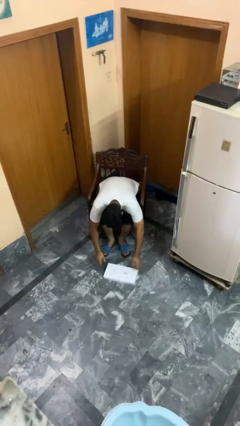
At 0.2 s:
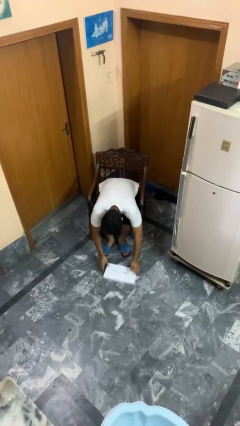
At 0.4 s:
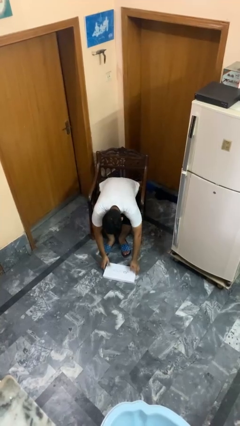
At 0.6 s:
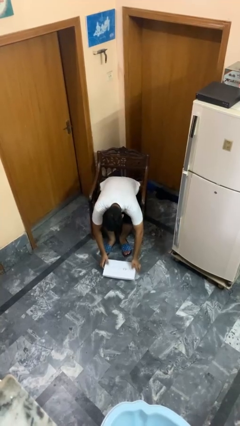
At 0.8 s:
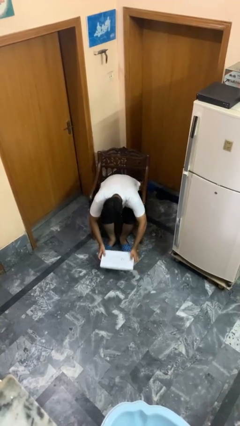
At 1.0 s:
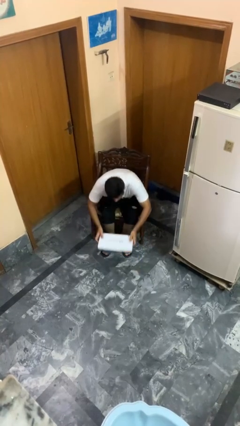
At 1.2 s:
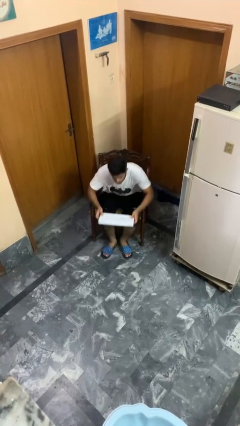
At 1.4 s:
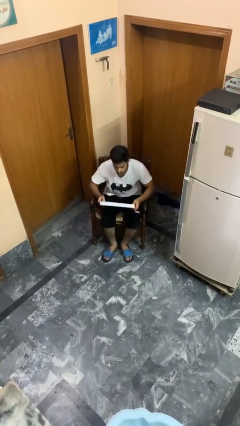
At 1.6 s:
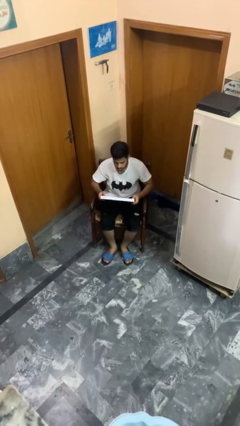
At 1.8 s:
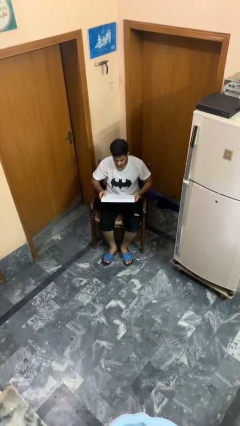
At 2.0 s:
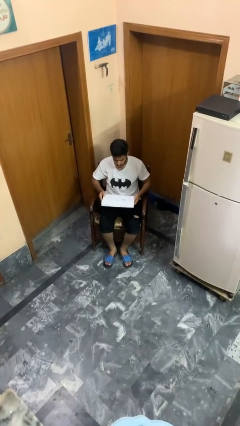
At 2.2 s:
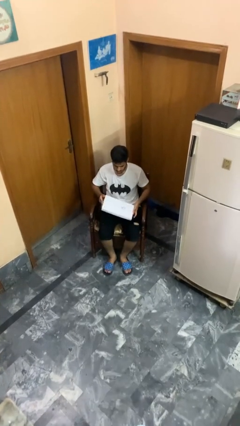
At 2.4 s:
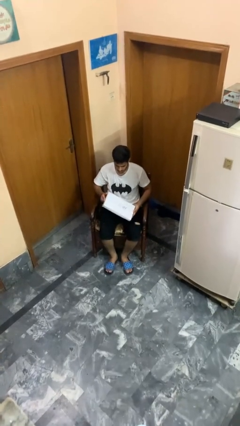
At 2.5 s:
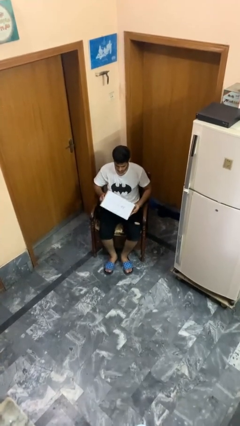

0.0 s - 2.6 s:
person picks up object from floor

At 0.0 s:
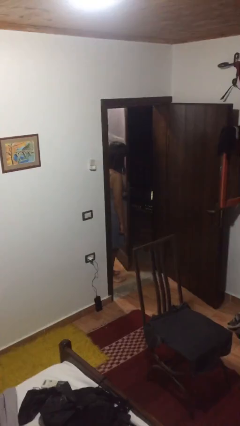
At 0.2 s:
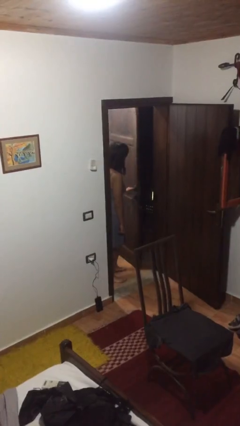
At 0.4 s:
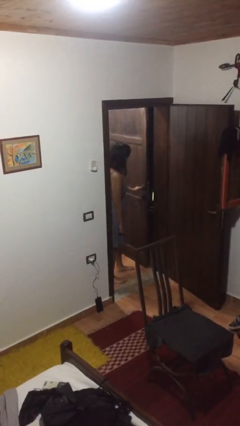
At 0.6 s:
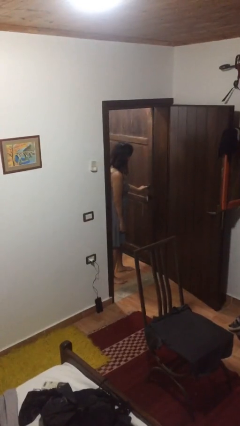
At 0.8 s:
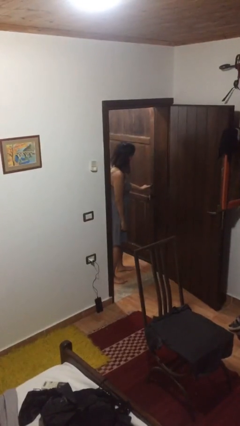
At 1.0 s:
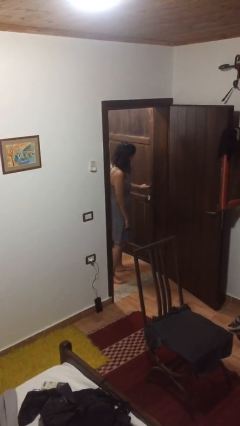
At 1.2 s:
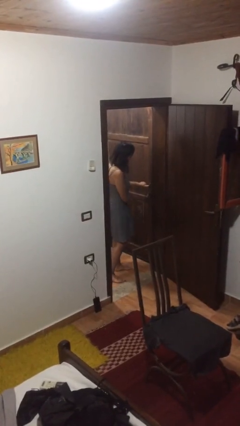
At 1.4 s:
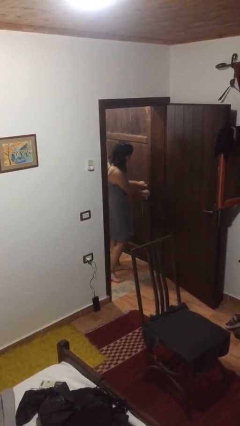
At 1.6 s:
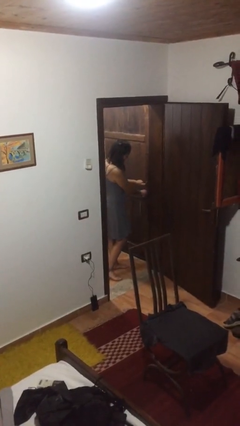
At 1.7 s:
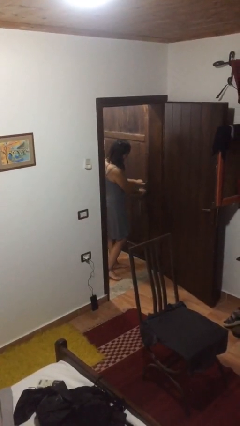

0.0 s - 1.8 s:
person closes facility door

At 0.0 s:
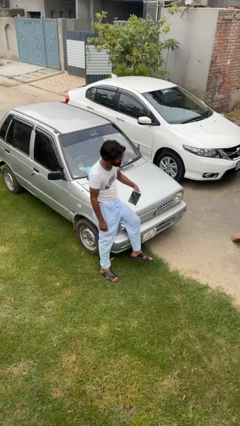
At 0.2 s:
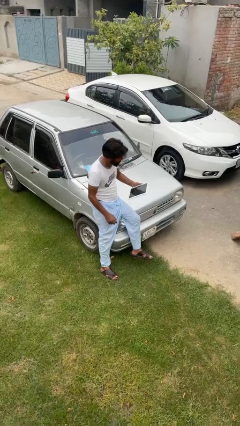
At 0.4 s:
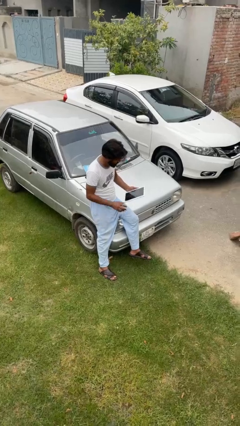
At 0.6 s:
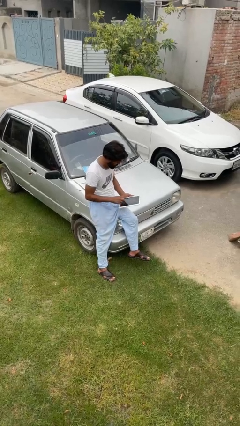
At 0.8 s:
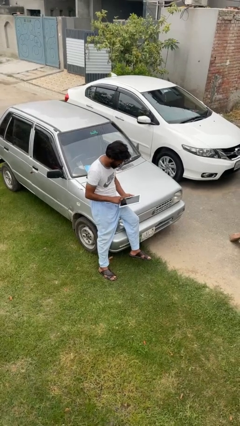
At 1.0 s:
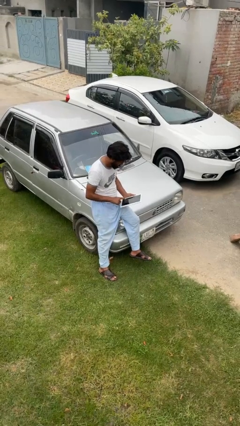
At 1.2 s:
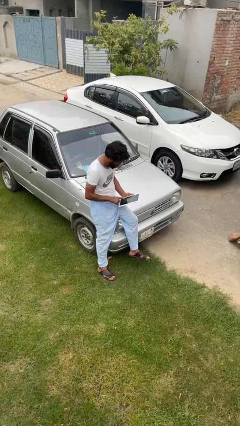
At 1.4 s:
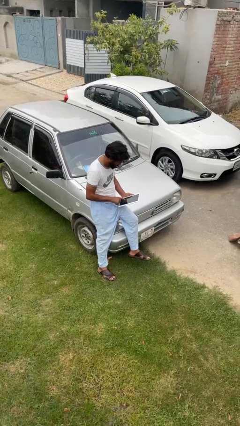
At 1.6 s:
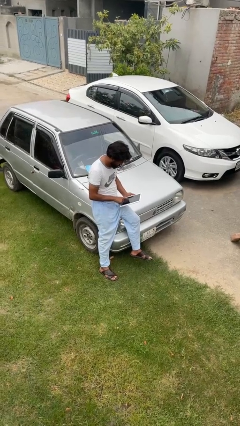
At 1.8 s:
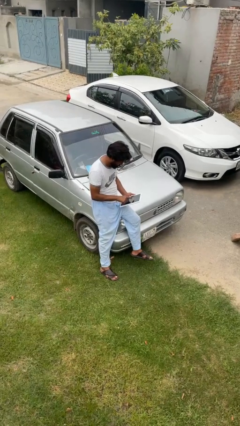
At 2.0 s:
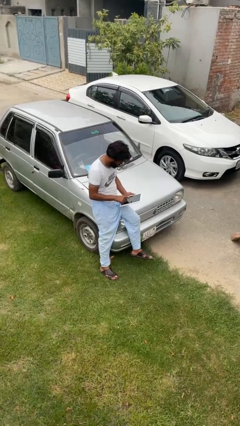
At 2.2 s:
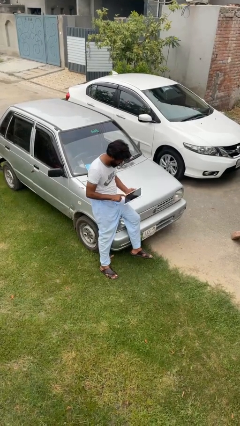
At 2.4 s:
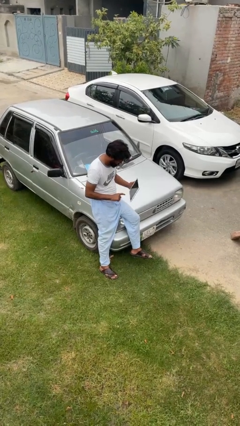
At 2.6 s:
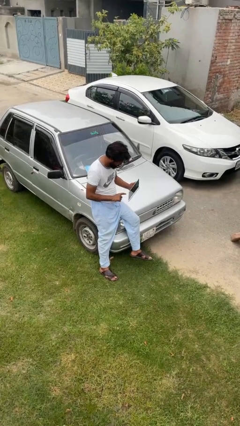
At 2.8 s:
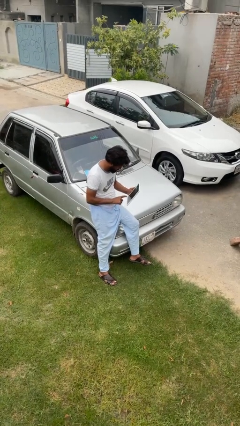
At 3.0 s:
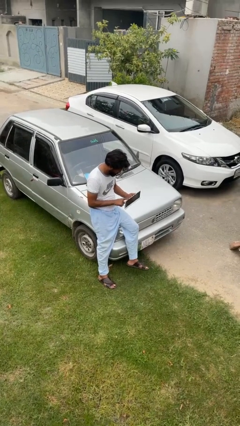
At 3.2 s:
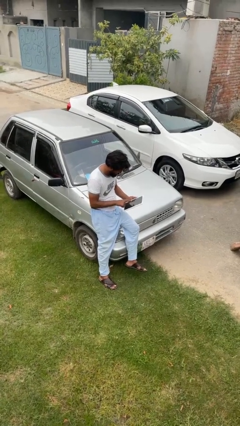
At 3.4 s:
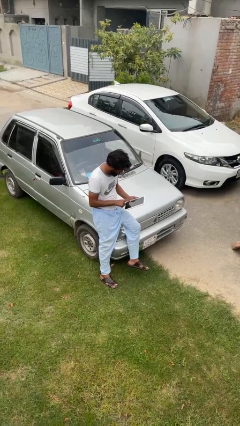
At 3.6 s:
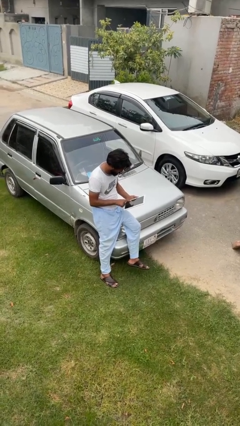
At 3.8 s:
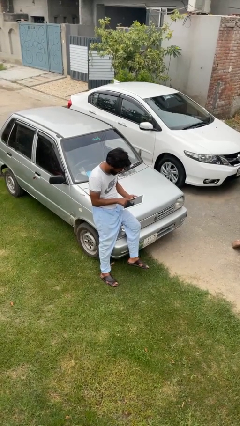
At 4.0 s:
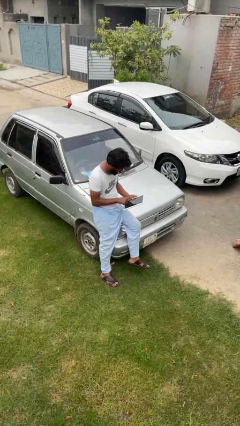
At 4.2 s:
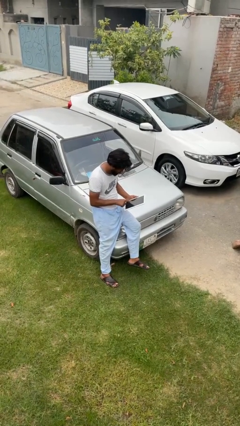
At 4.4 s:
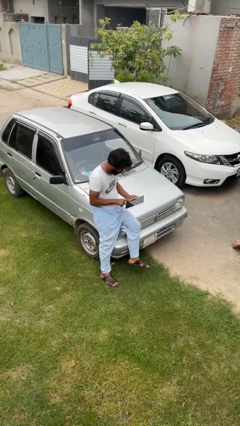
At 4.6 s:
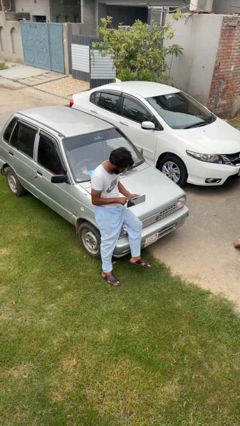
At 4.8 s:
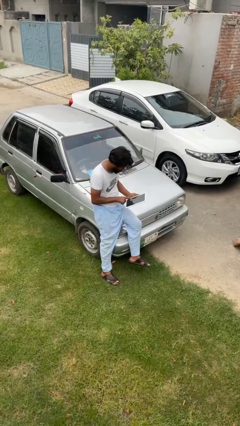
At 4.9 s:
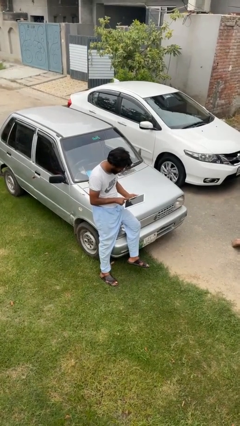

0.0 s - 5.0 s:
person interacts with tablet

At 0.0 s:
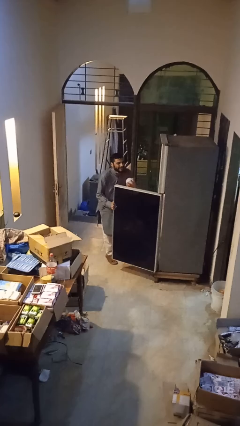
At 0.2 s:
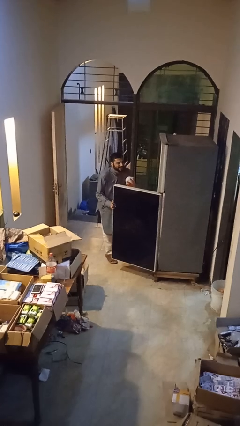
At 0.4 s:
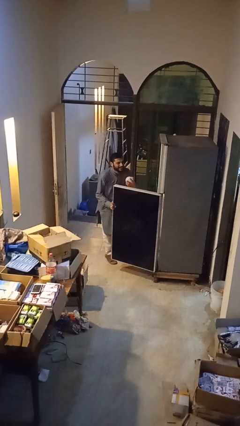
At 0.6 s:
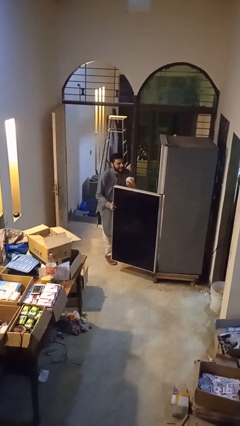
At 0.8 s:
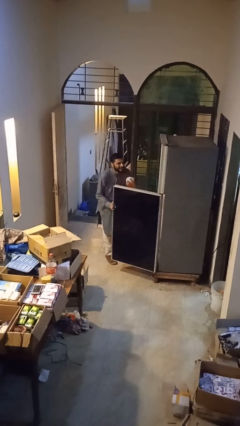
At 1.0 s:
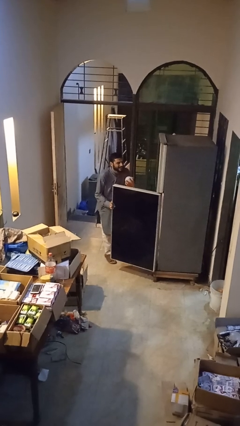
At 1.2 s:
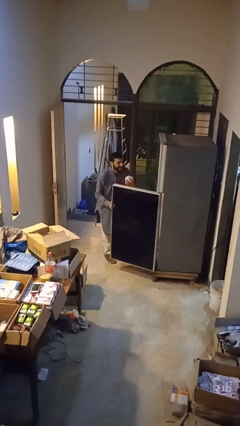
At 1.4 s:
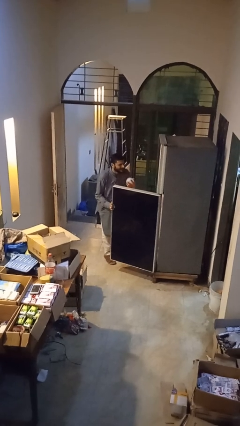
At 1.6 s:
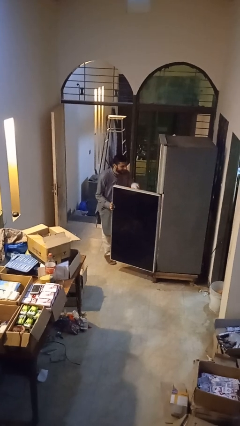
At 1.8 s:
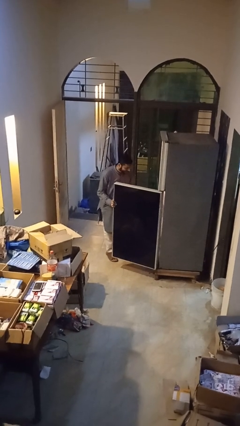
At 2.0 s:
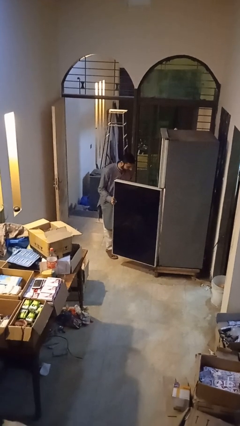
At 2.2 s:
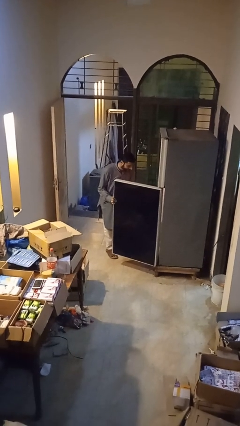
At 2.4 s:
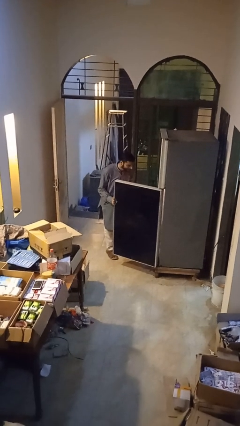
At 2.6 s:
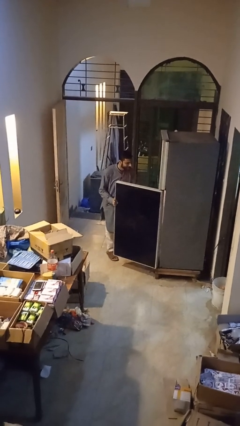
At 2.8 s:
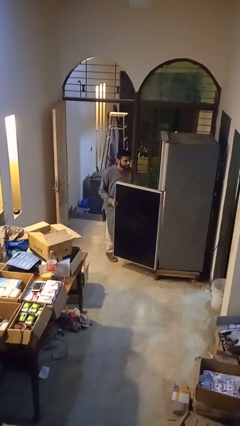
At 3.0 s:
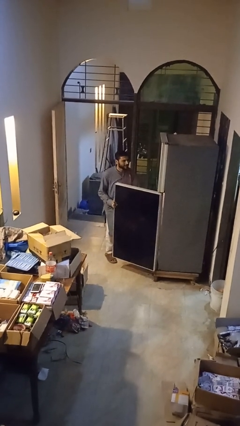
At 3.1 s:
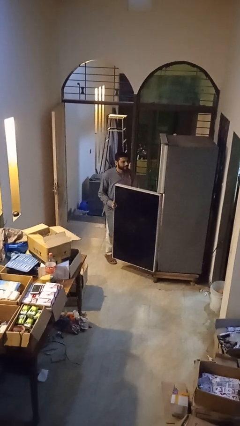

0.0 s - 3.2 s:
person takes object from refrigerator

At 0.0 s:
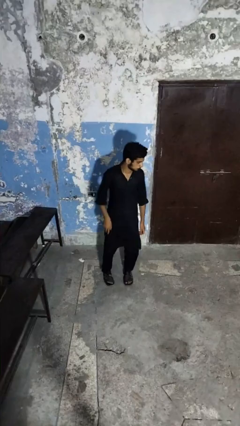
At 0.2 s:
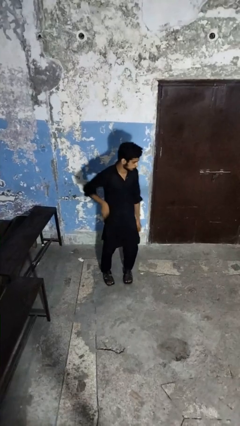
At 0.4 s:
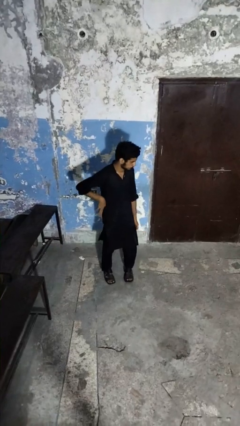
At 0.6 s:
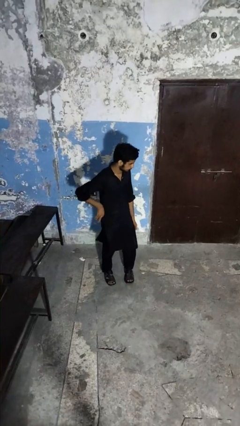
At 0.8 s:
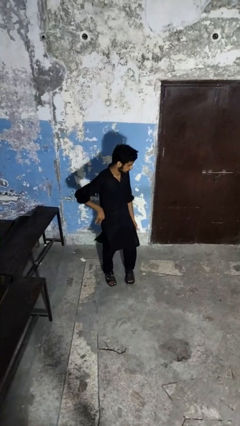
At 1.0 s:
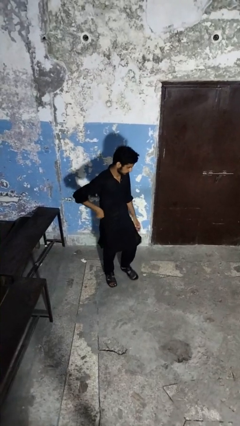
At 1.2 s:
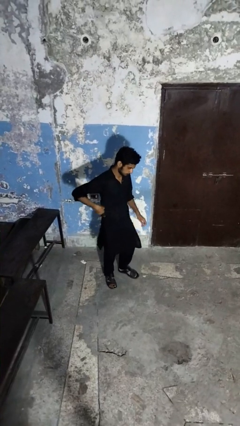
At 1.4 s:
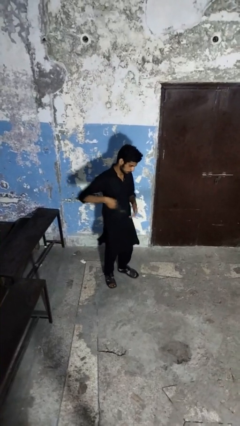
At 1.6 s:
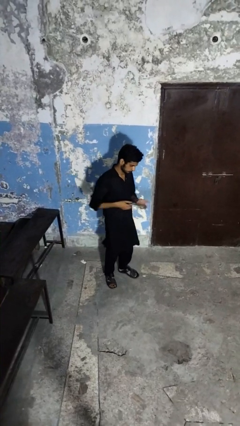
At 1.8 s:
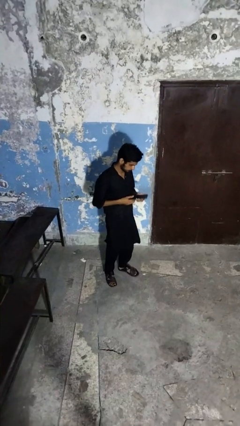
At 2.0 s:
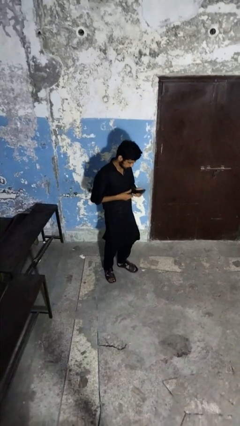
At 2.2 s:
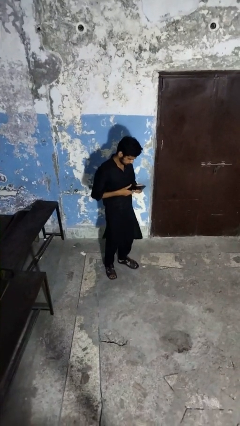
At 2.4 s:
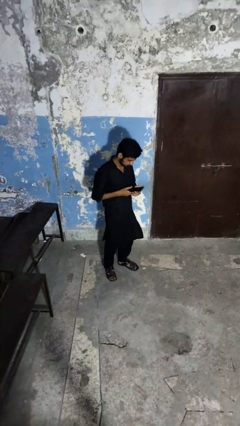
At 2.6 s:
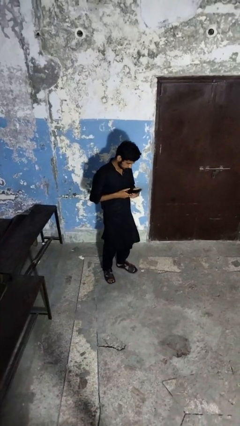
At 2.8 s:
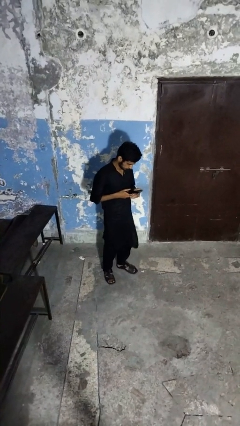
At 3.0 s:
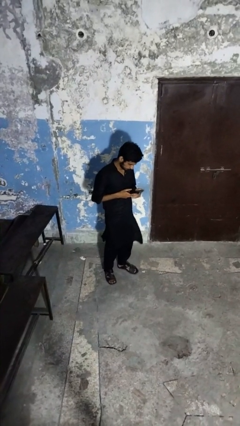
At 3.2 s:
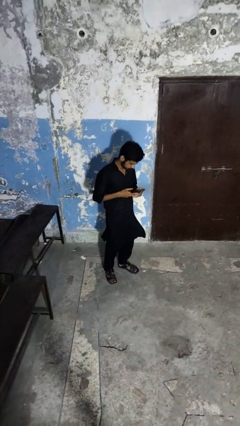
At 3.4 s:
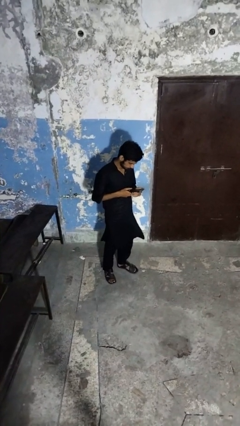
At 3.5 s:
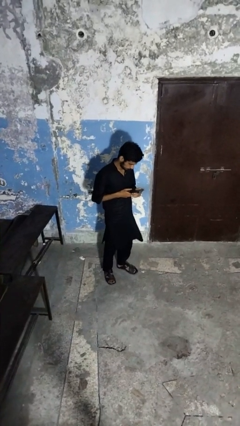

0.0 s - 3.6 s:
person takes phone from pocket

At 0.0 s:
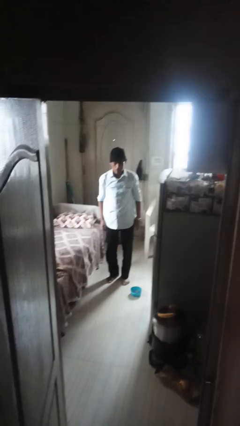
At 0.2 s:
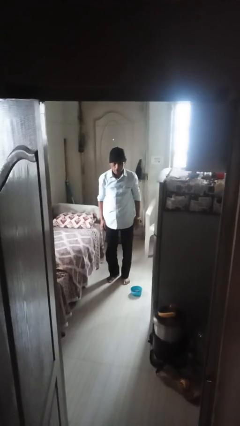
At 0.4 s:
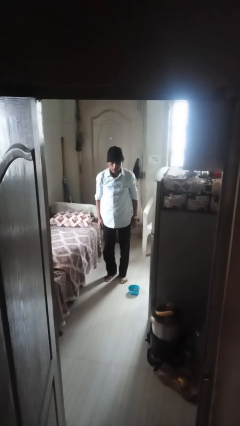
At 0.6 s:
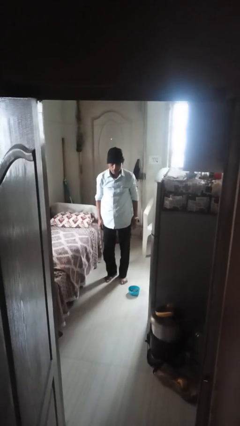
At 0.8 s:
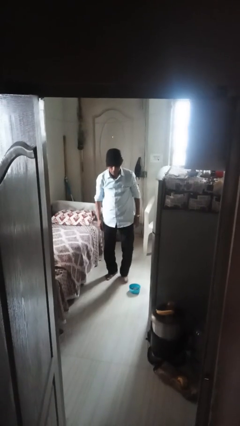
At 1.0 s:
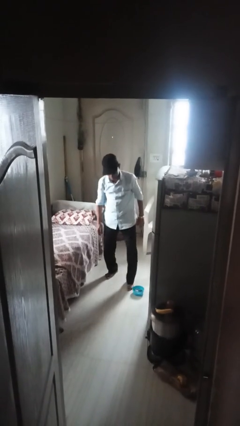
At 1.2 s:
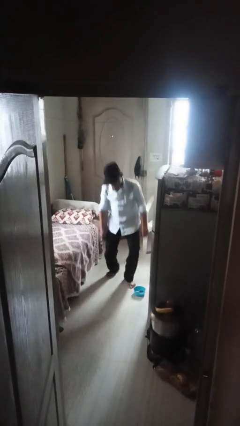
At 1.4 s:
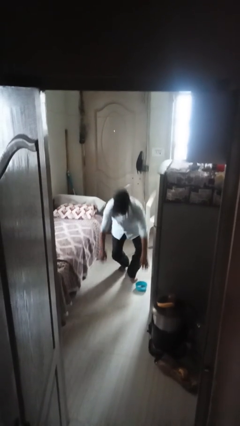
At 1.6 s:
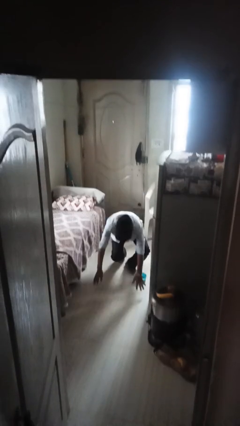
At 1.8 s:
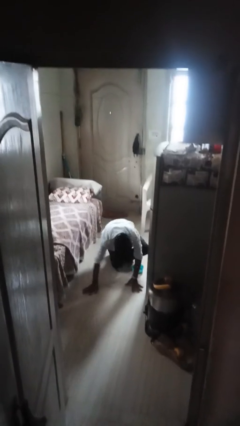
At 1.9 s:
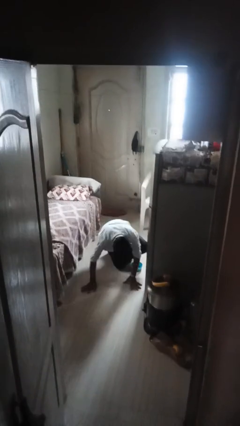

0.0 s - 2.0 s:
person trips on object on floor
